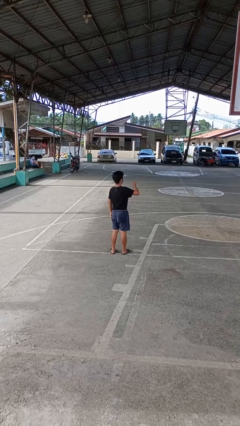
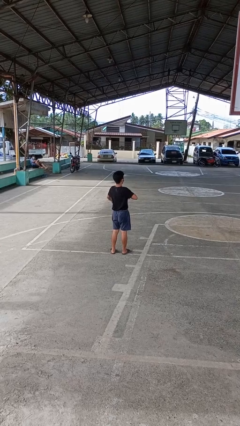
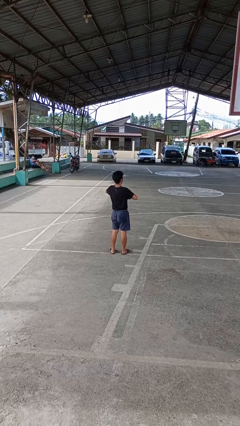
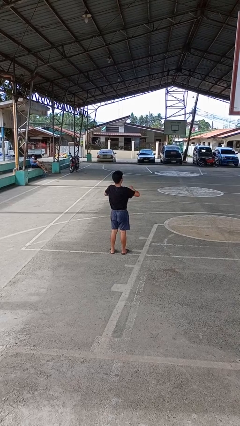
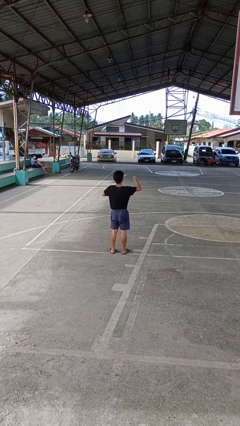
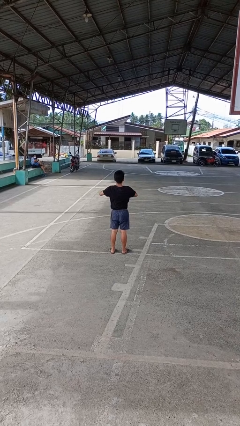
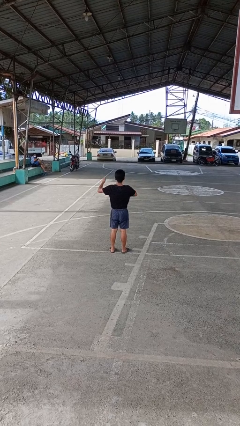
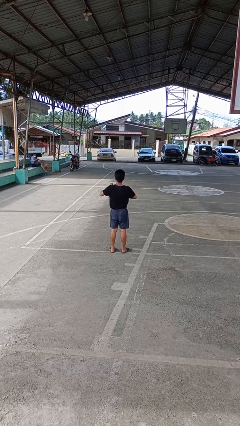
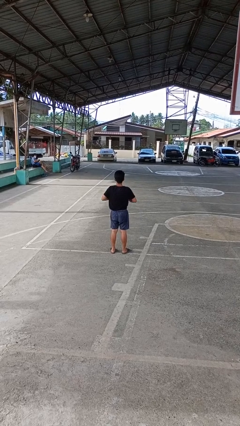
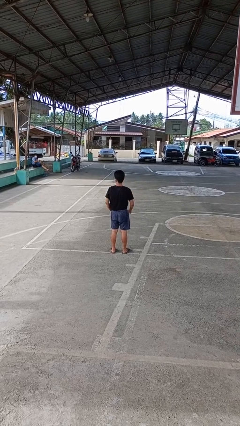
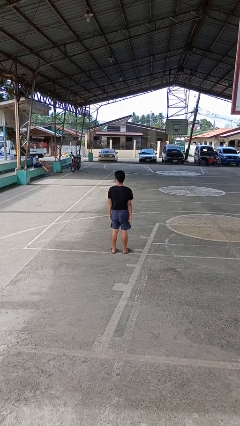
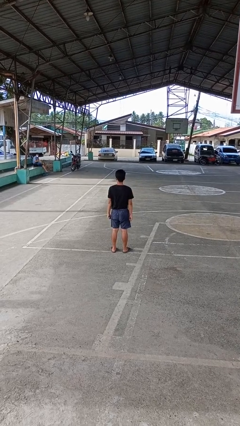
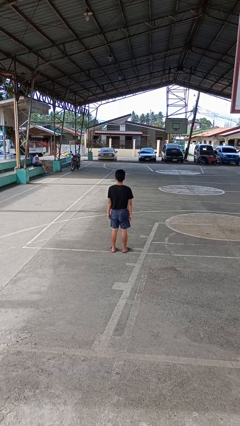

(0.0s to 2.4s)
person drums on chest

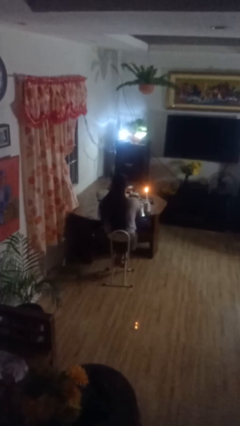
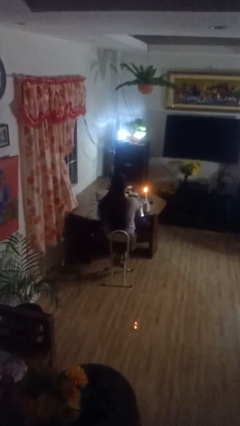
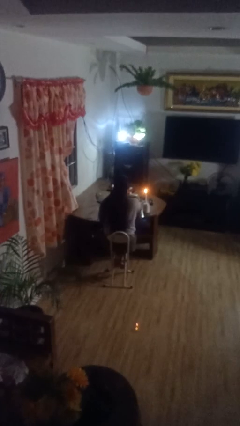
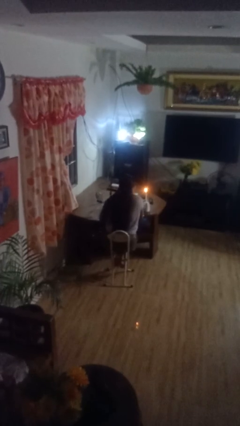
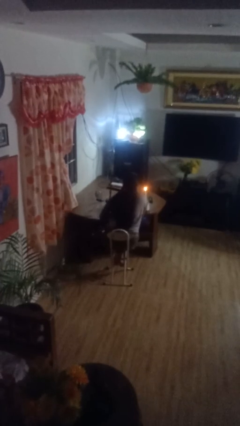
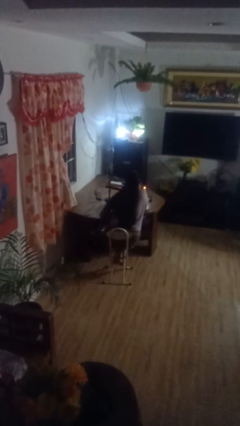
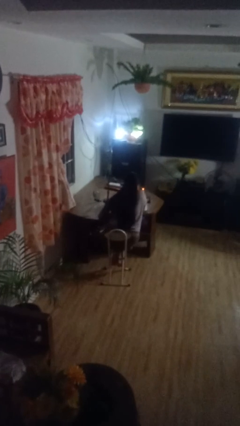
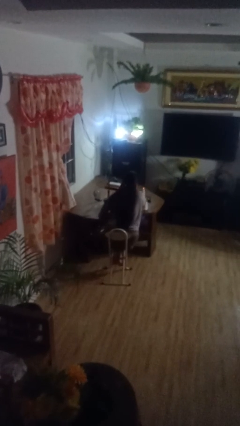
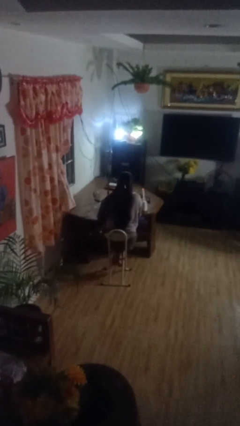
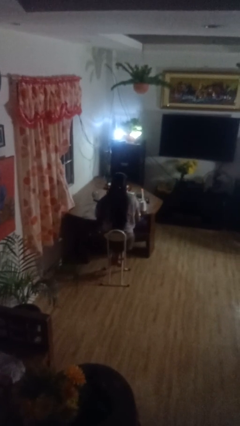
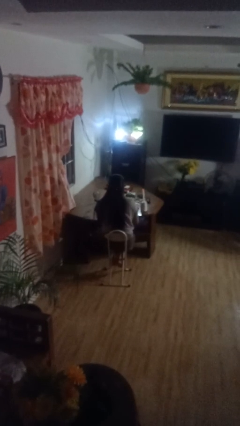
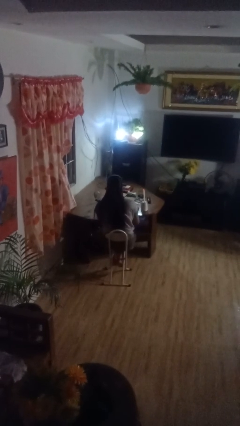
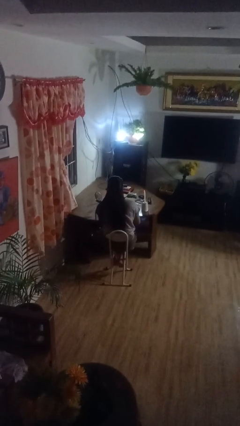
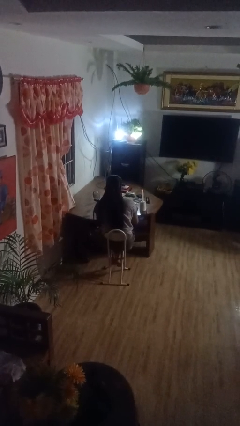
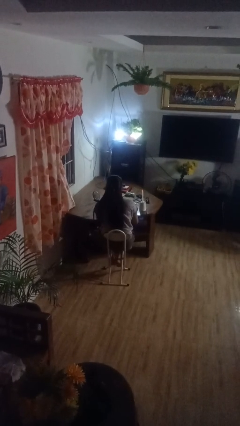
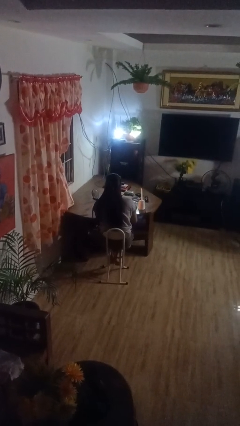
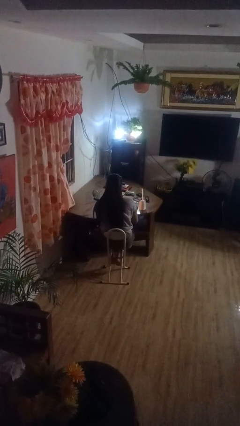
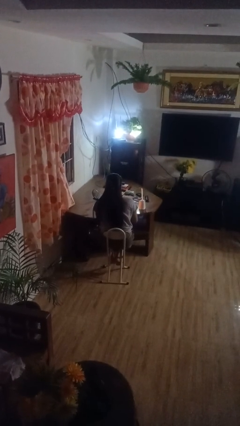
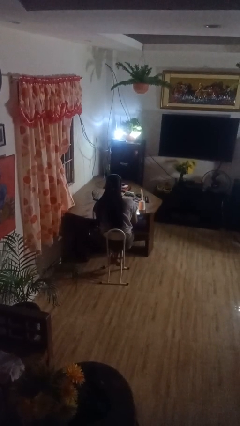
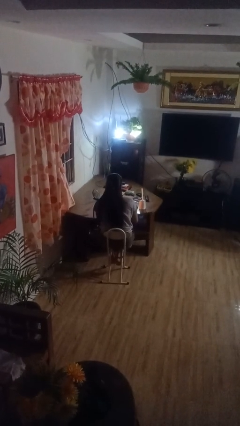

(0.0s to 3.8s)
person extinguishes candle

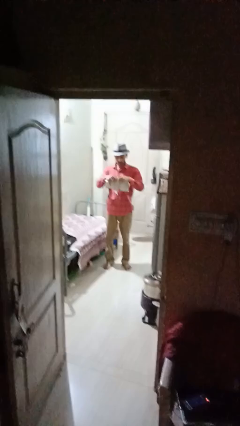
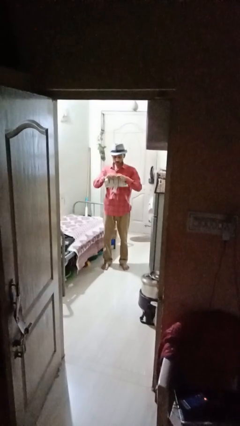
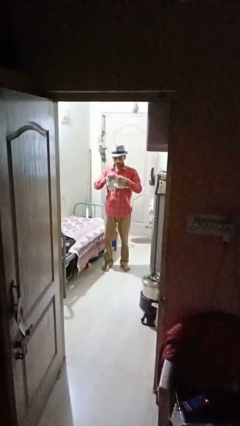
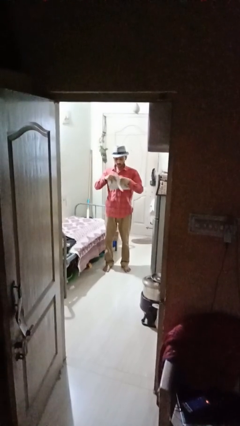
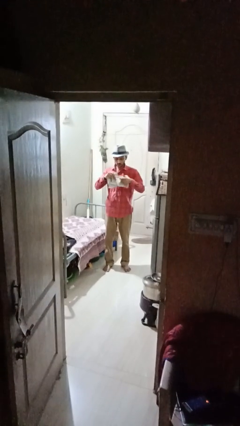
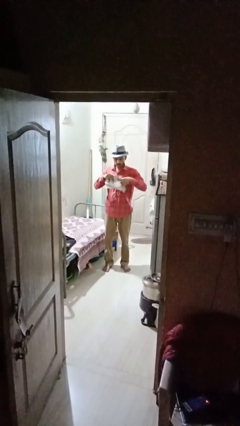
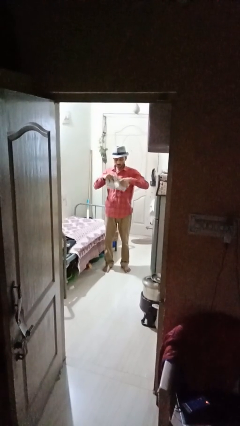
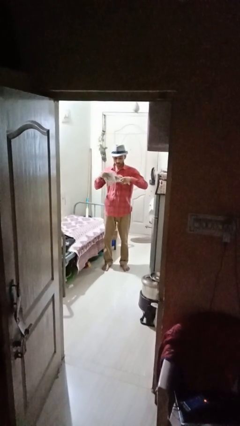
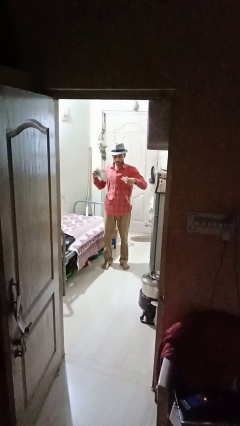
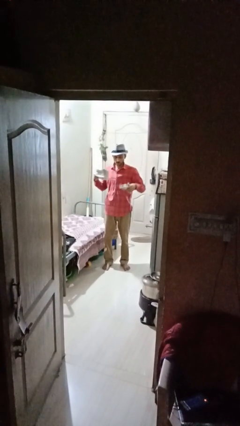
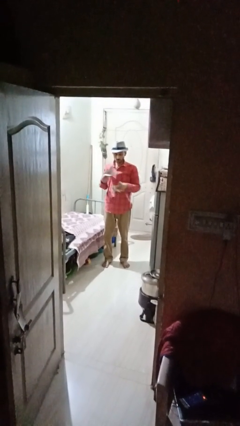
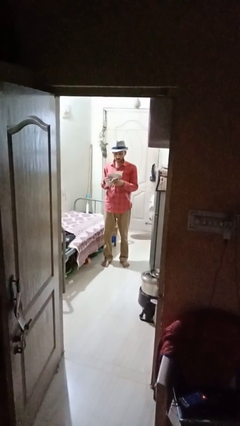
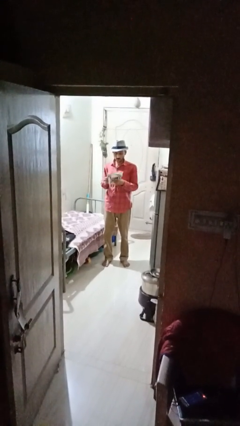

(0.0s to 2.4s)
person tears paper

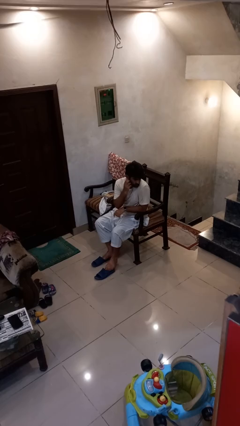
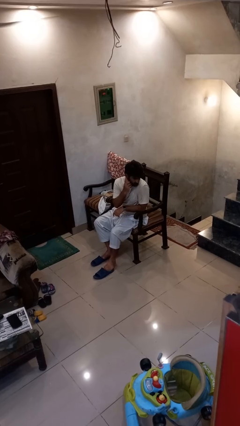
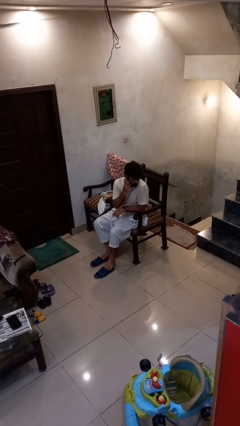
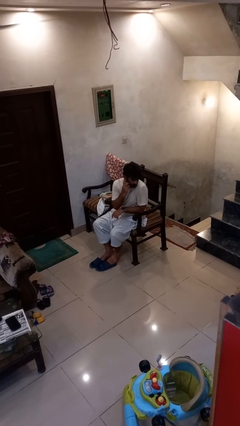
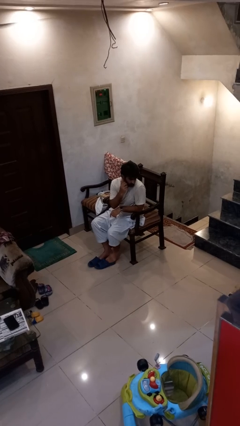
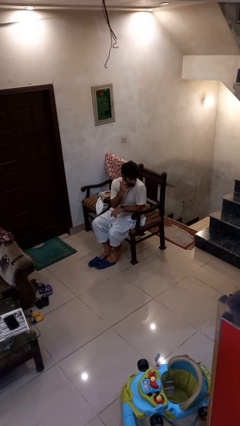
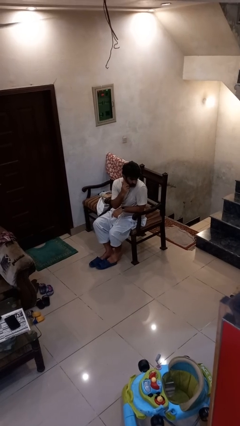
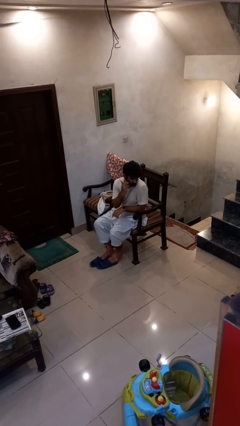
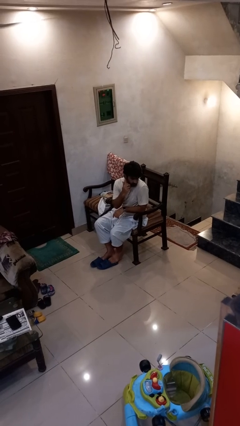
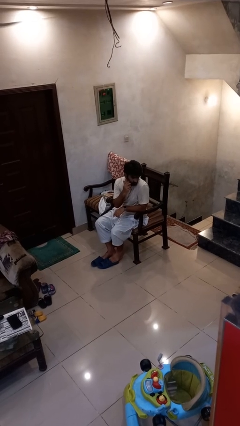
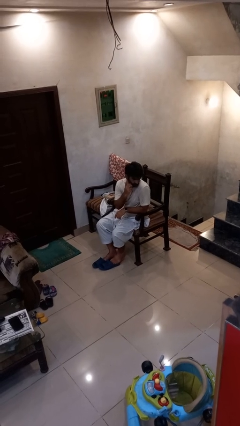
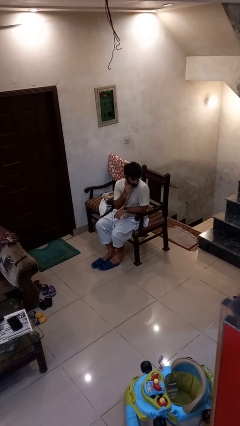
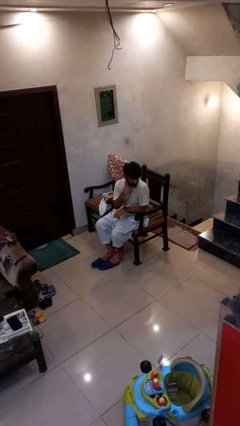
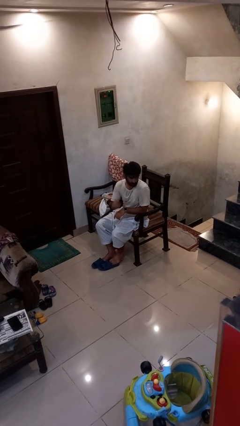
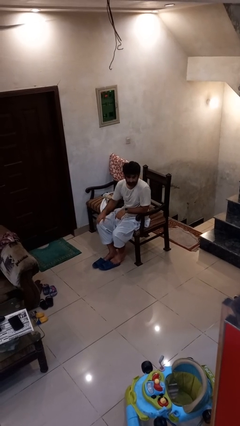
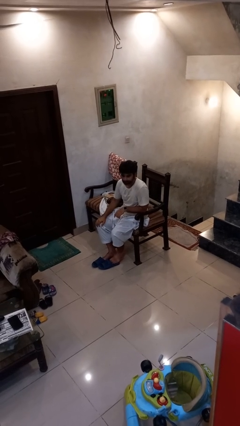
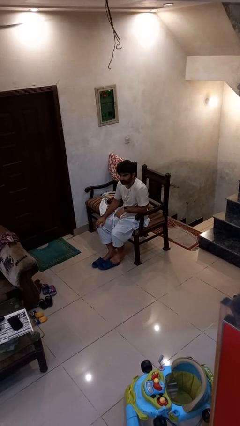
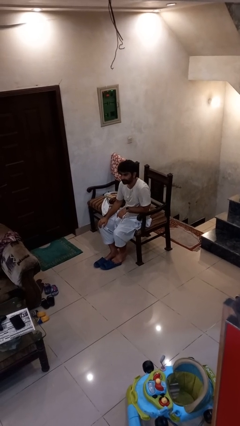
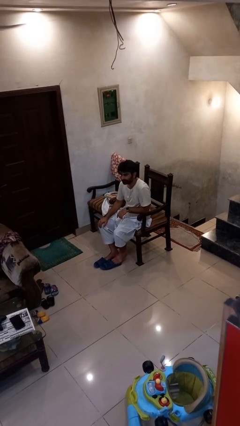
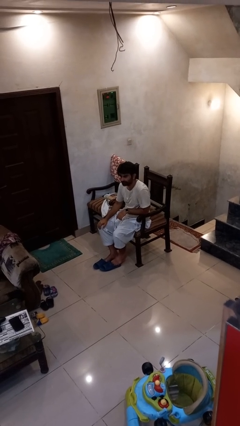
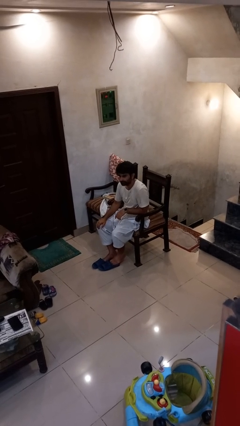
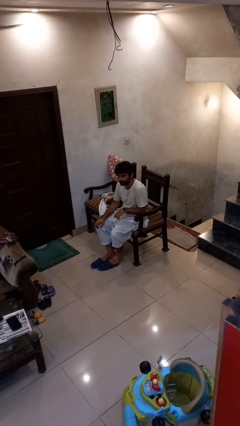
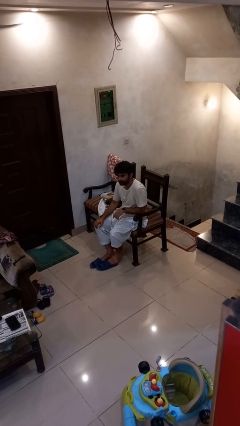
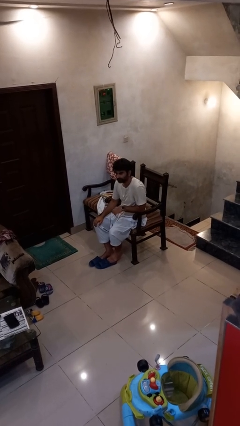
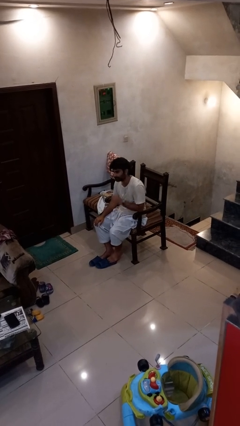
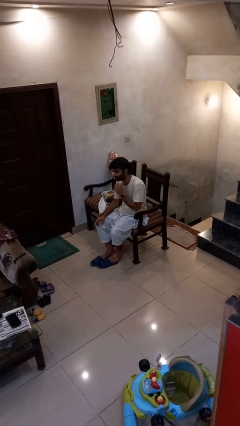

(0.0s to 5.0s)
person cracks knuckles

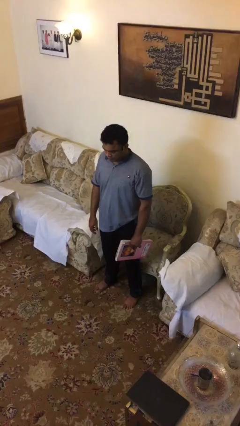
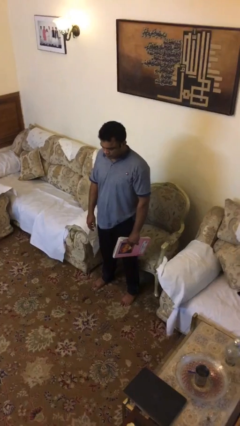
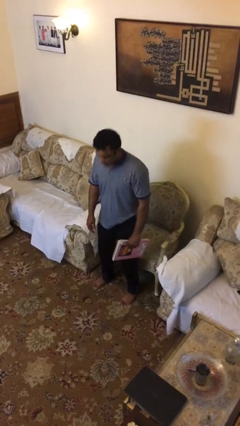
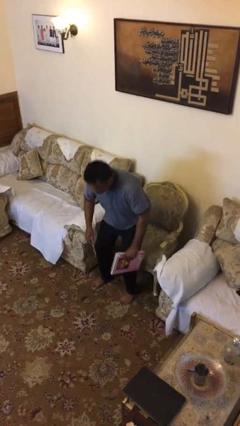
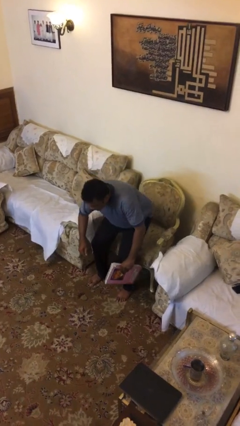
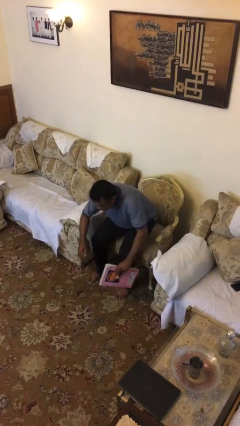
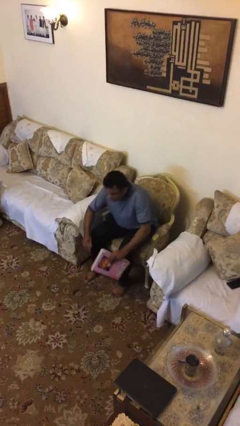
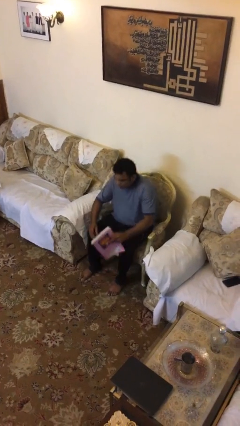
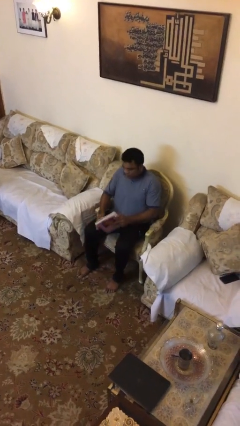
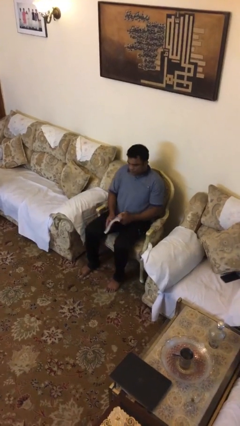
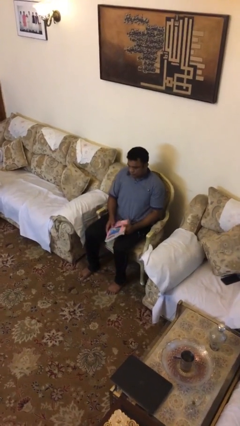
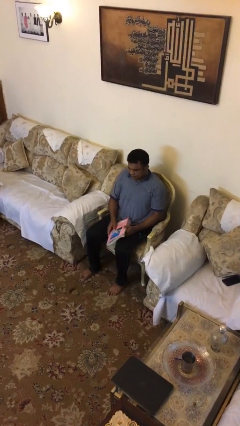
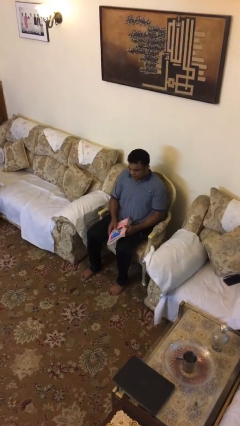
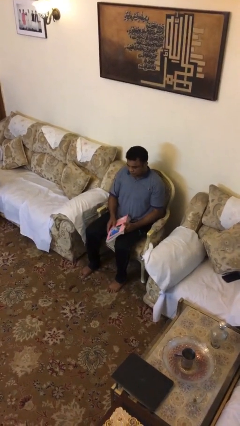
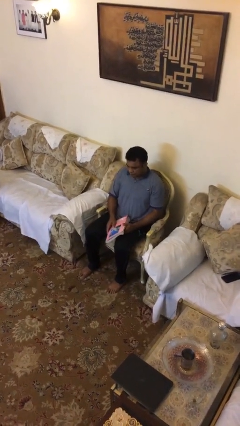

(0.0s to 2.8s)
person sits down

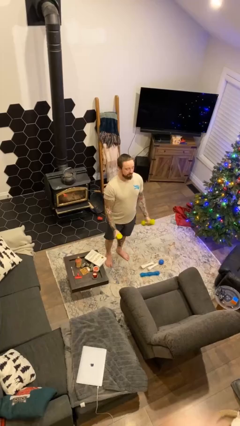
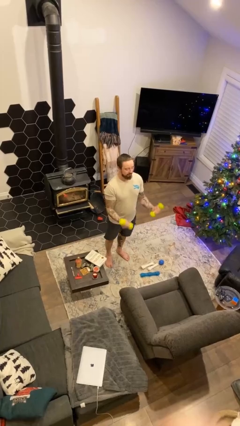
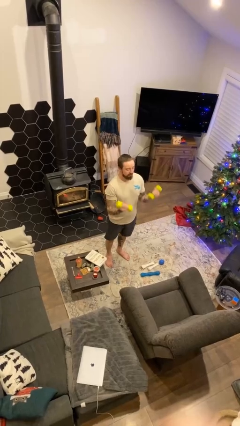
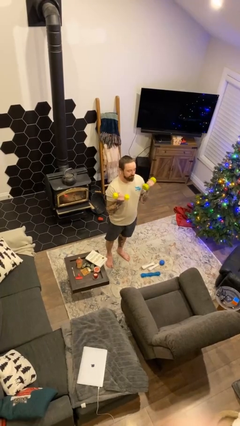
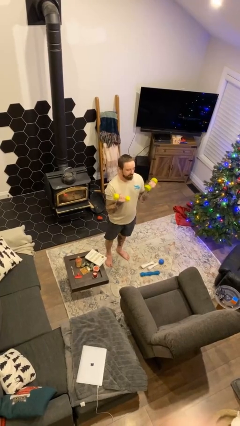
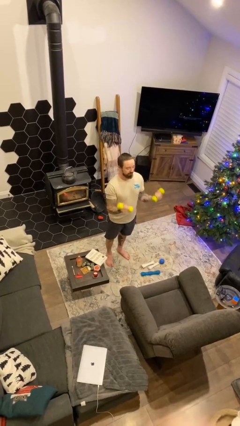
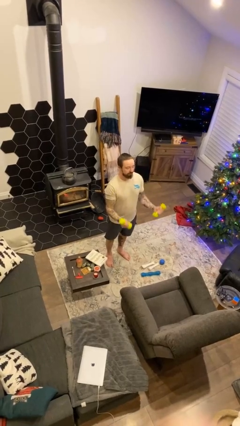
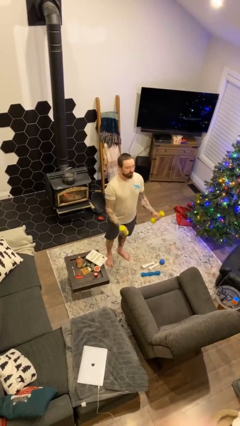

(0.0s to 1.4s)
person lifts dumbbells
